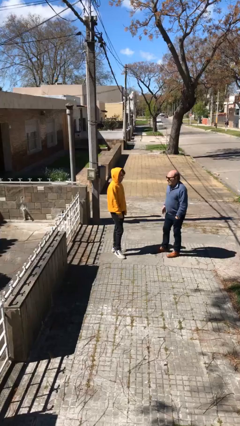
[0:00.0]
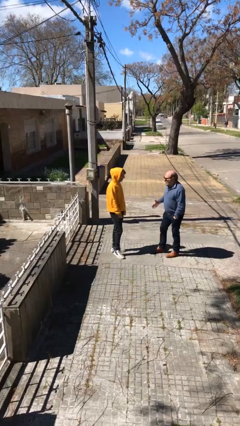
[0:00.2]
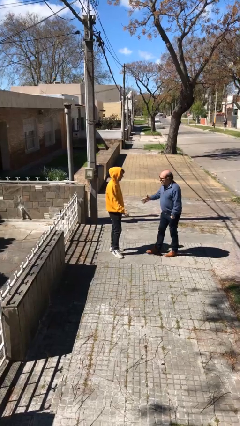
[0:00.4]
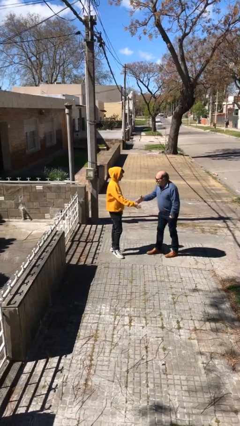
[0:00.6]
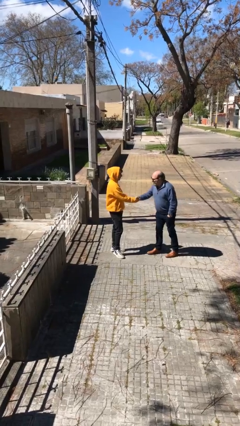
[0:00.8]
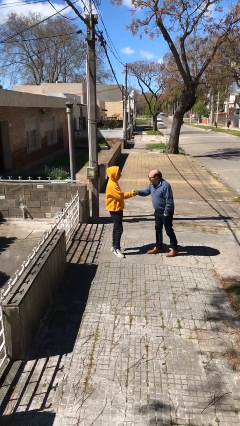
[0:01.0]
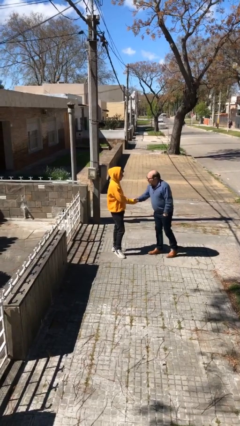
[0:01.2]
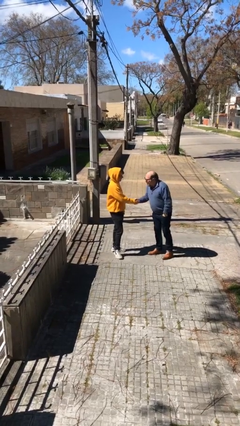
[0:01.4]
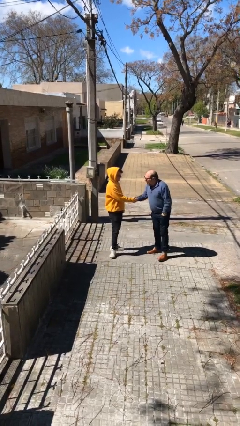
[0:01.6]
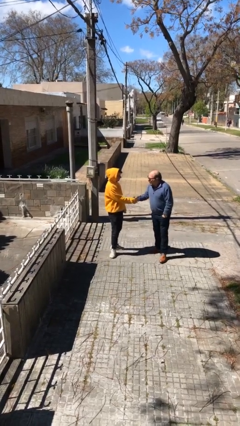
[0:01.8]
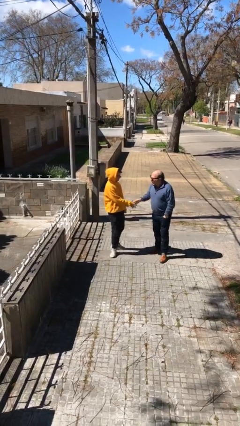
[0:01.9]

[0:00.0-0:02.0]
person shakes hand

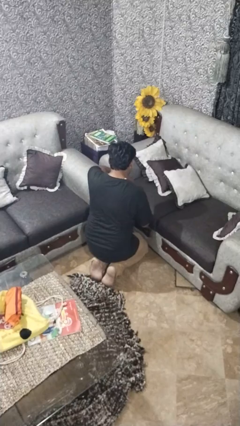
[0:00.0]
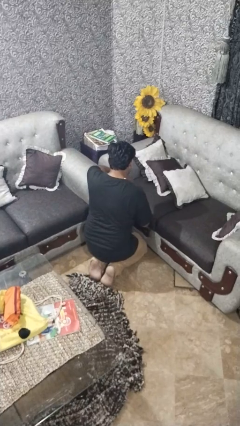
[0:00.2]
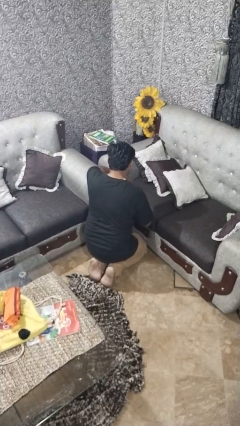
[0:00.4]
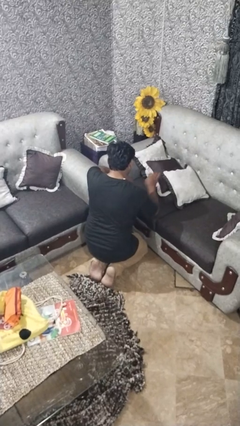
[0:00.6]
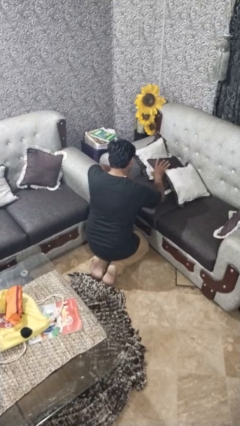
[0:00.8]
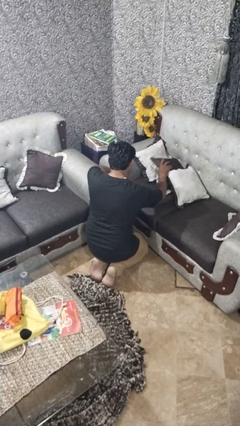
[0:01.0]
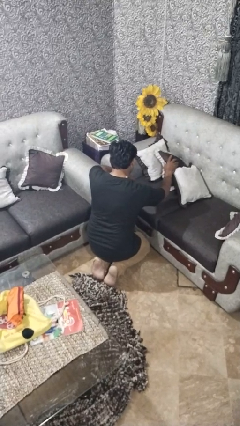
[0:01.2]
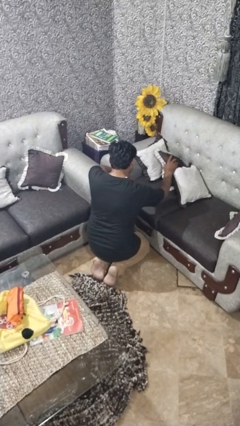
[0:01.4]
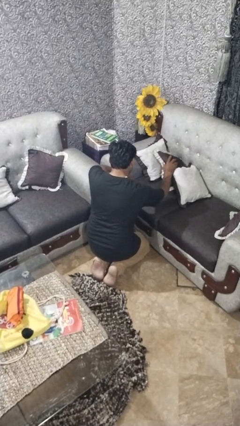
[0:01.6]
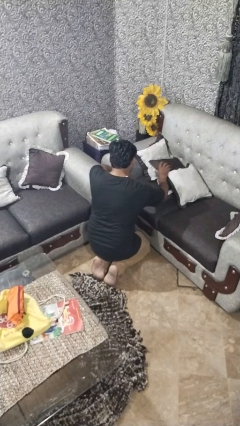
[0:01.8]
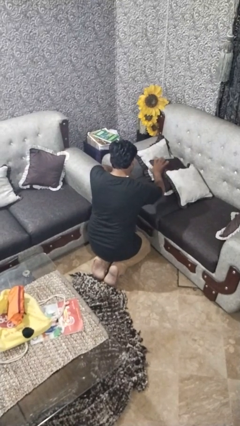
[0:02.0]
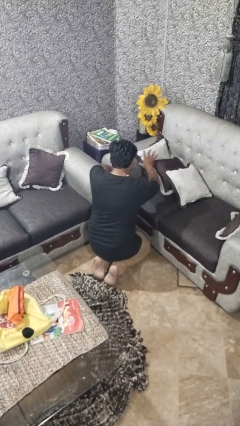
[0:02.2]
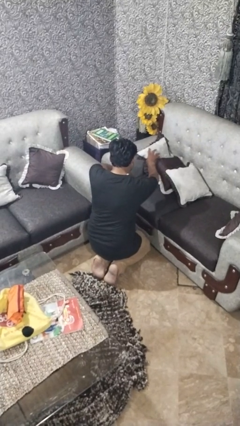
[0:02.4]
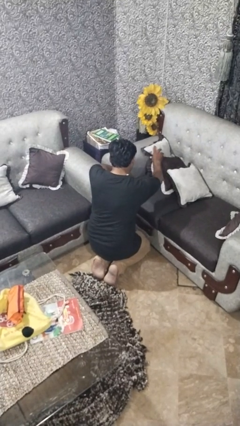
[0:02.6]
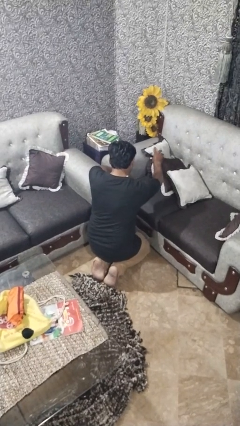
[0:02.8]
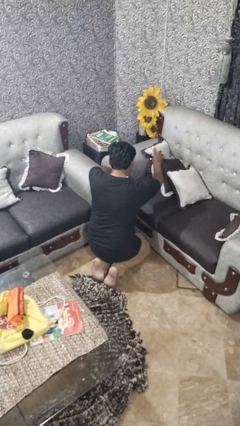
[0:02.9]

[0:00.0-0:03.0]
person searches in couch

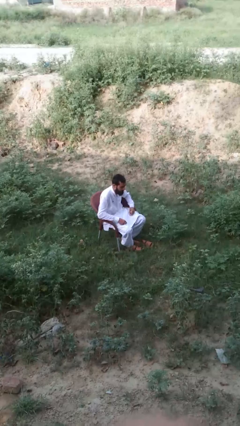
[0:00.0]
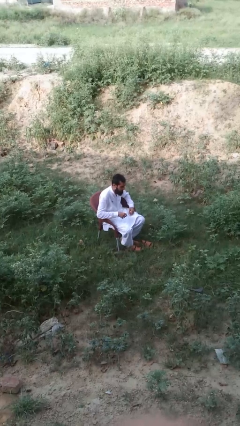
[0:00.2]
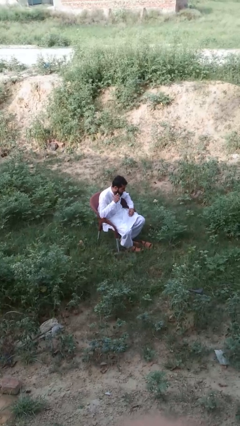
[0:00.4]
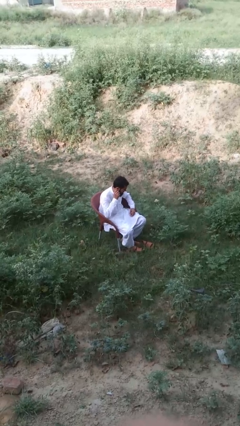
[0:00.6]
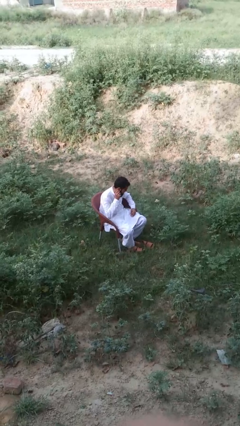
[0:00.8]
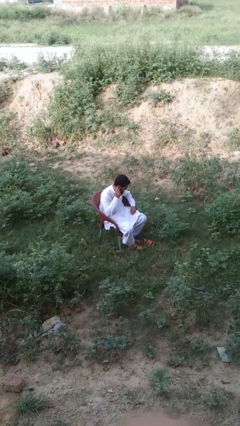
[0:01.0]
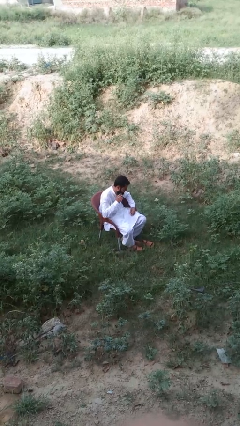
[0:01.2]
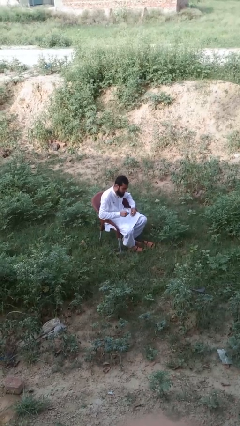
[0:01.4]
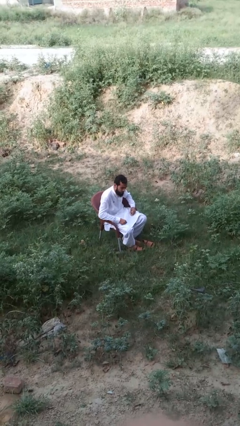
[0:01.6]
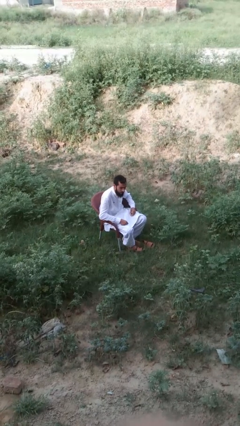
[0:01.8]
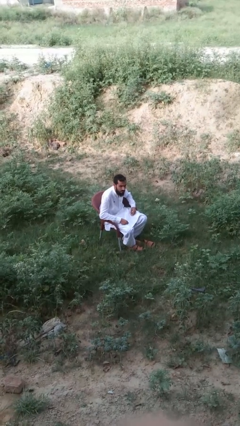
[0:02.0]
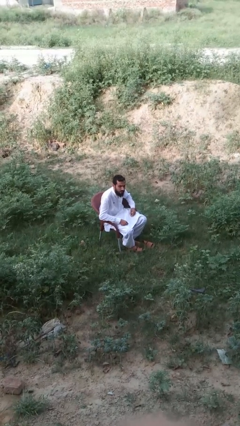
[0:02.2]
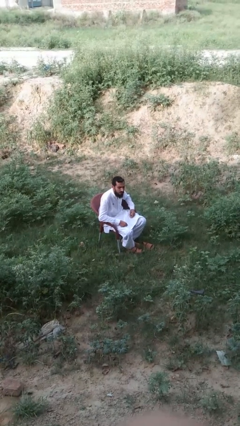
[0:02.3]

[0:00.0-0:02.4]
person touches earlobe

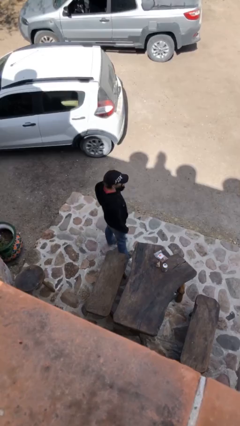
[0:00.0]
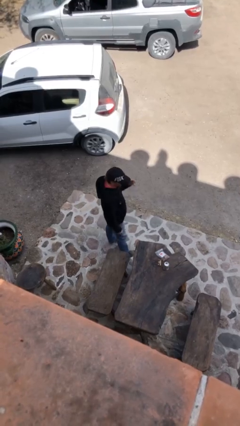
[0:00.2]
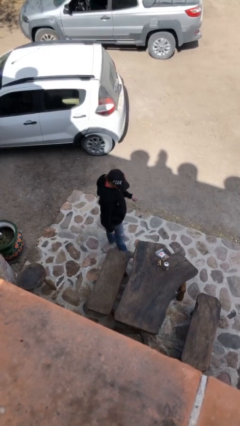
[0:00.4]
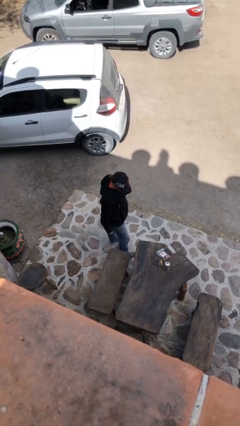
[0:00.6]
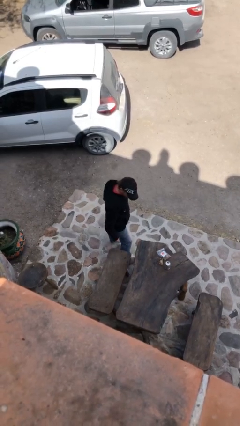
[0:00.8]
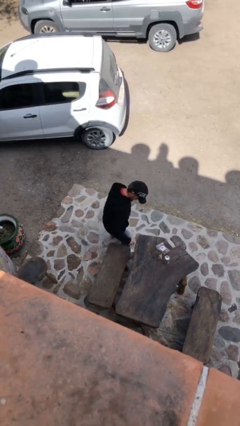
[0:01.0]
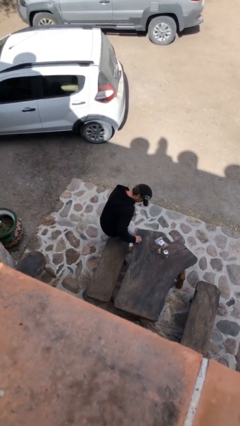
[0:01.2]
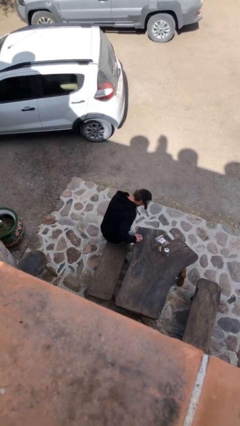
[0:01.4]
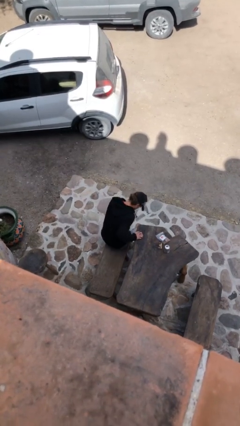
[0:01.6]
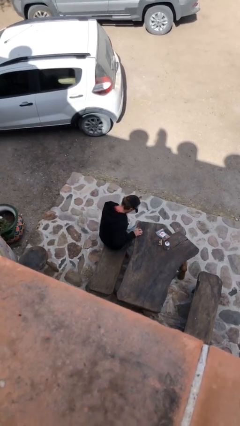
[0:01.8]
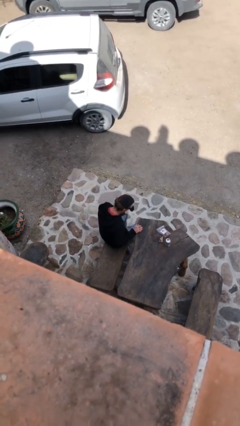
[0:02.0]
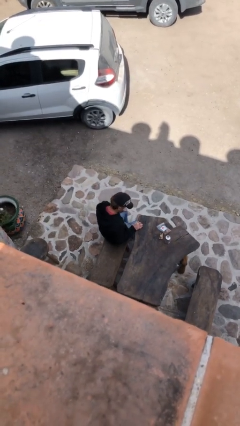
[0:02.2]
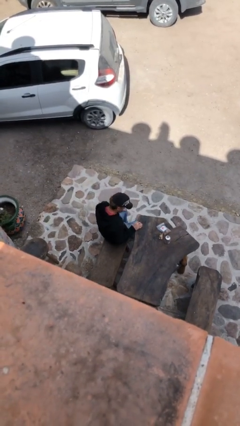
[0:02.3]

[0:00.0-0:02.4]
person sits down

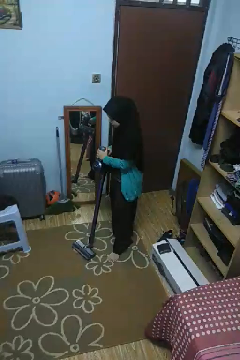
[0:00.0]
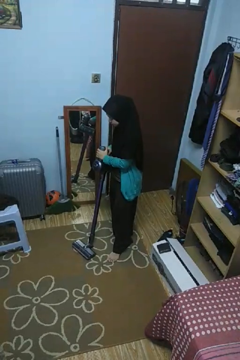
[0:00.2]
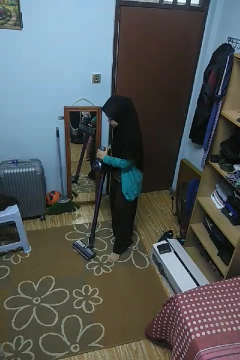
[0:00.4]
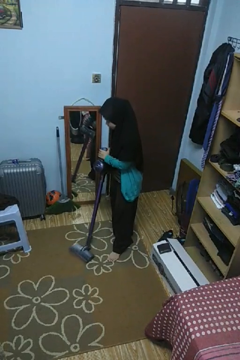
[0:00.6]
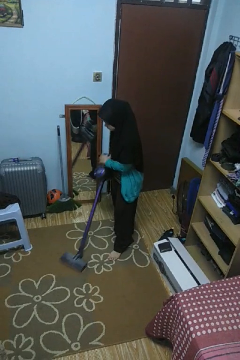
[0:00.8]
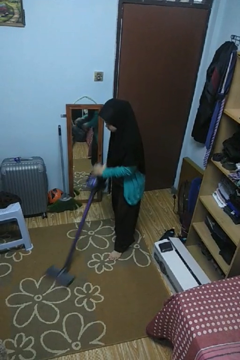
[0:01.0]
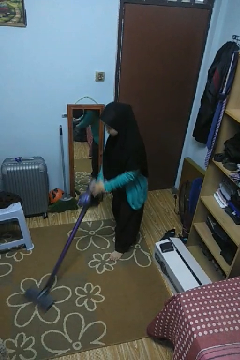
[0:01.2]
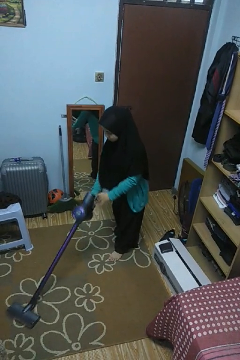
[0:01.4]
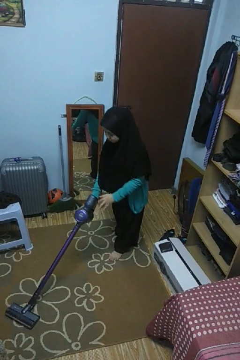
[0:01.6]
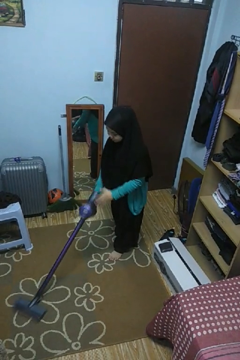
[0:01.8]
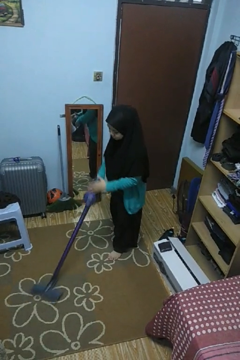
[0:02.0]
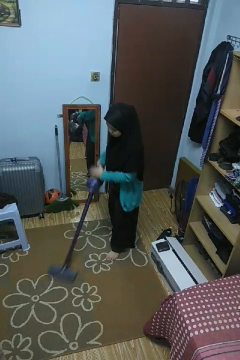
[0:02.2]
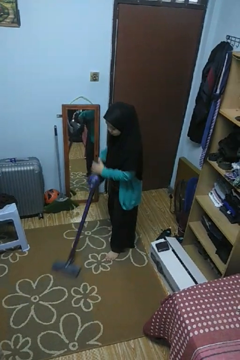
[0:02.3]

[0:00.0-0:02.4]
person vacuums carpet

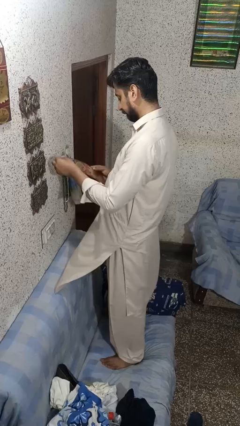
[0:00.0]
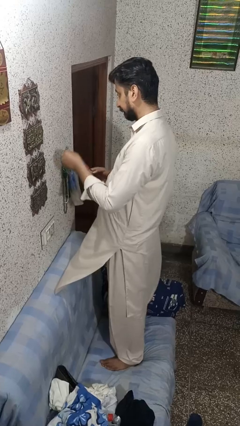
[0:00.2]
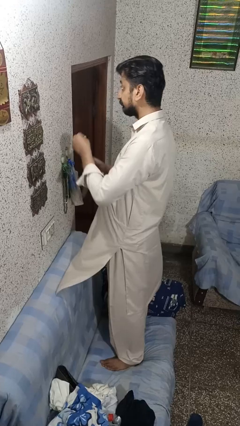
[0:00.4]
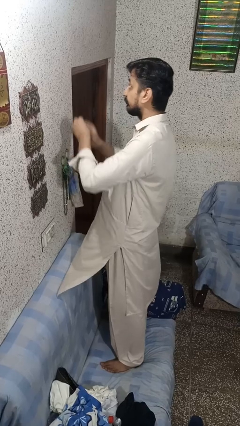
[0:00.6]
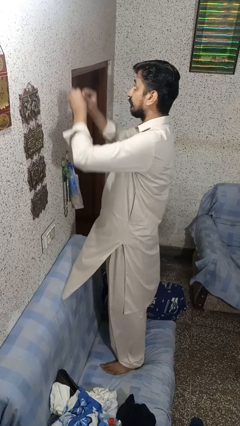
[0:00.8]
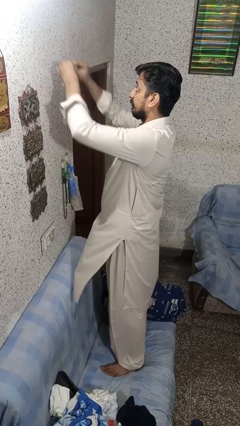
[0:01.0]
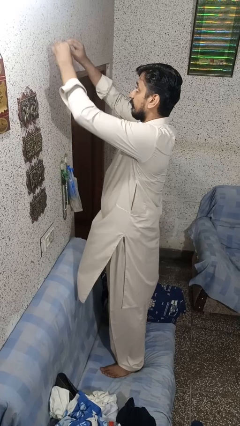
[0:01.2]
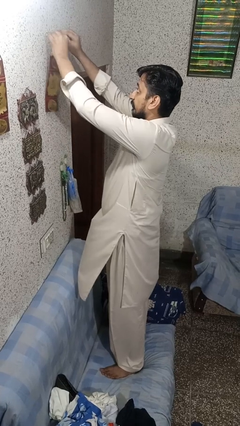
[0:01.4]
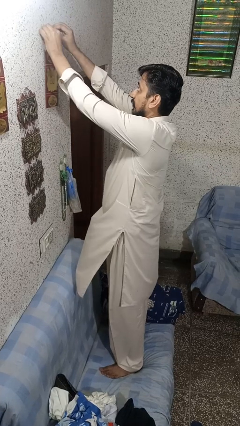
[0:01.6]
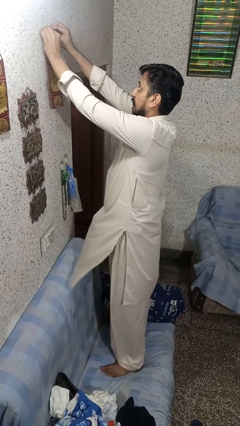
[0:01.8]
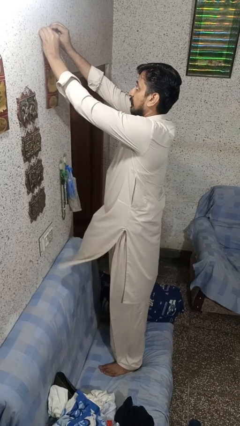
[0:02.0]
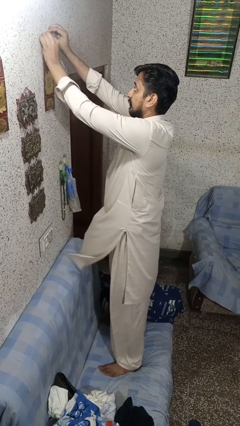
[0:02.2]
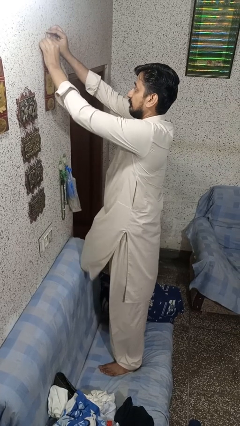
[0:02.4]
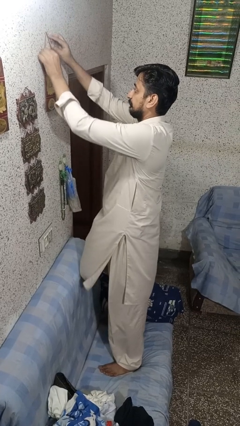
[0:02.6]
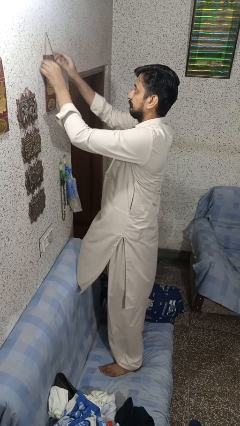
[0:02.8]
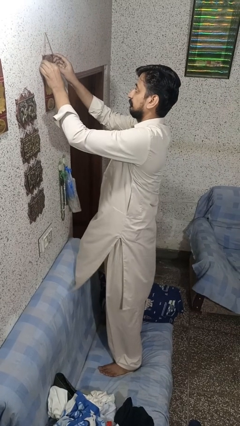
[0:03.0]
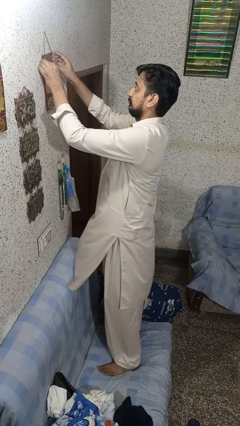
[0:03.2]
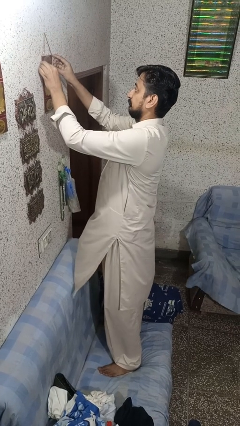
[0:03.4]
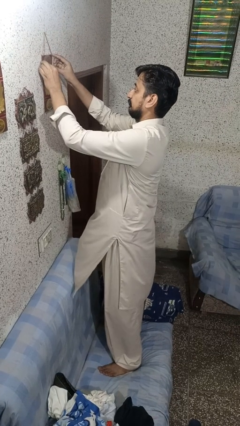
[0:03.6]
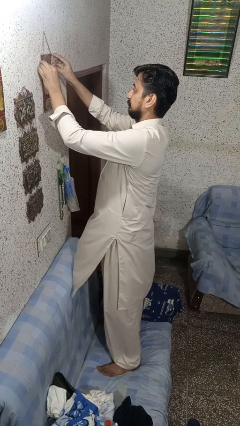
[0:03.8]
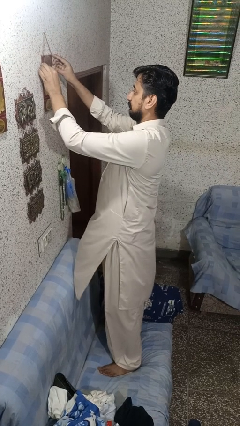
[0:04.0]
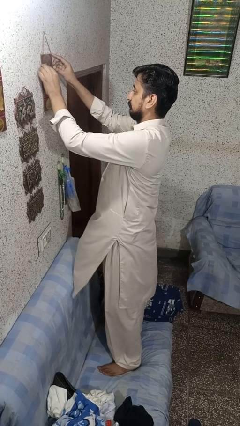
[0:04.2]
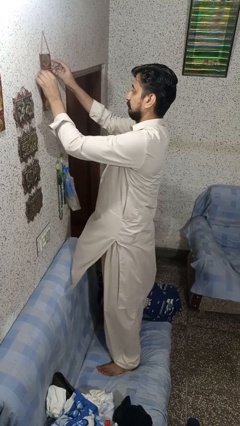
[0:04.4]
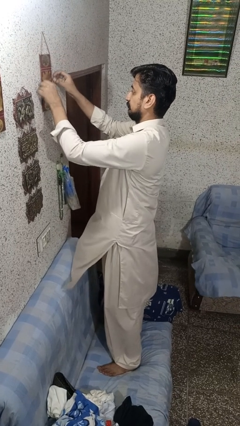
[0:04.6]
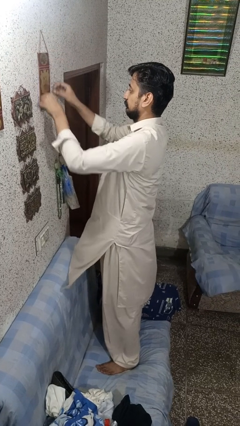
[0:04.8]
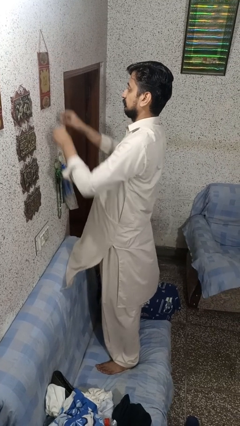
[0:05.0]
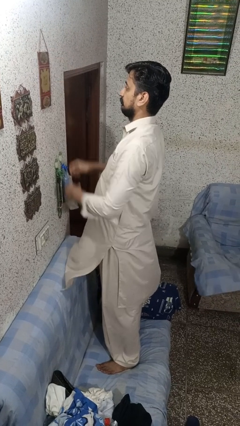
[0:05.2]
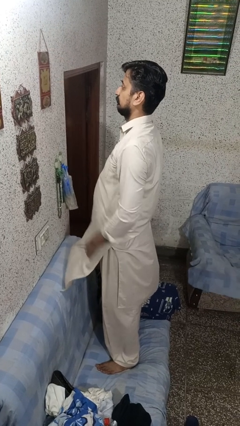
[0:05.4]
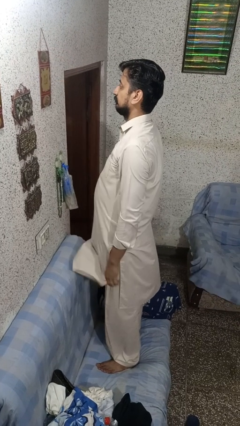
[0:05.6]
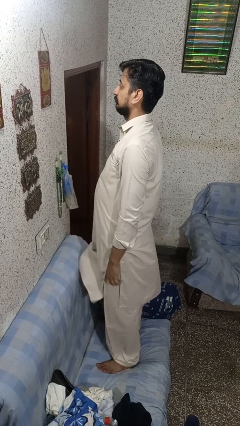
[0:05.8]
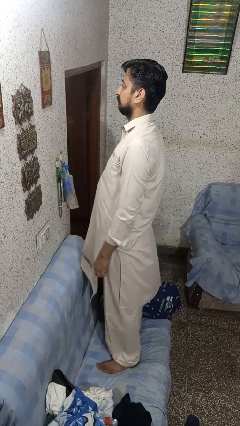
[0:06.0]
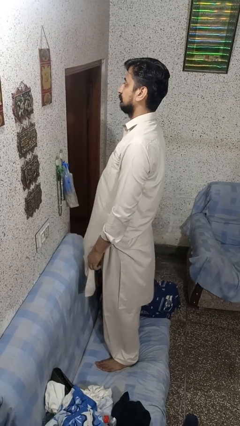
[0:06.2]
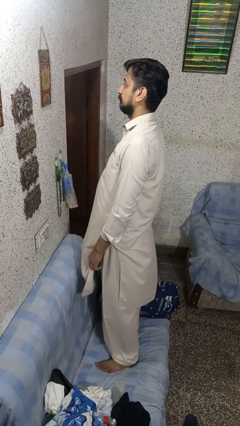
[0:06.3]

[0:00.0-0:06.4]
person puts up picture frame
